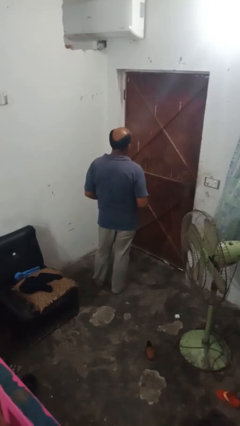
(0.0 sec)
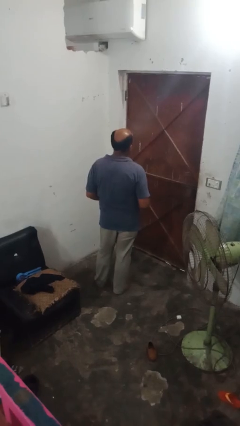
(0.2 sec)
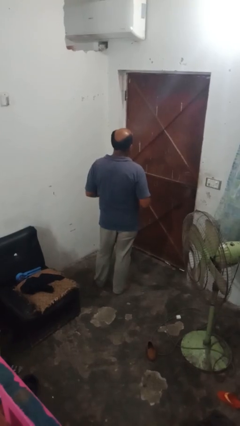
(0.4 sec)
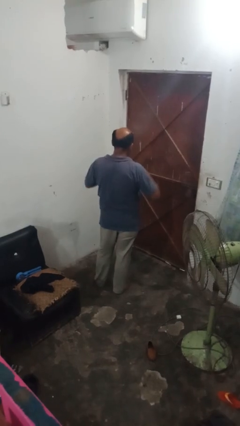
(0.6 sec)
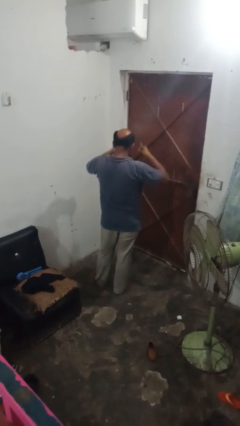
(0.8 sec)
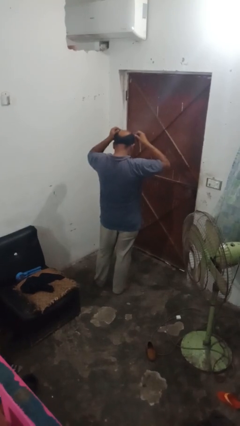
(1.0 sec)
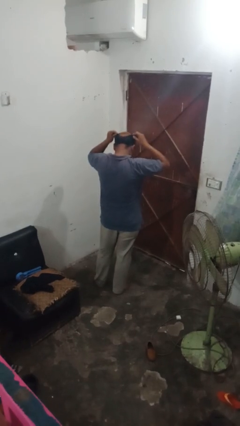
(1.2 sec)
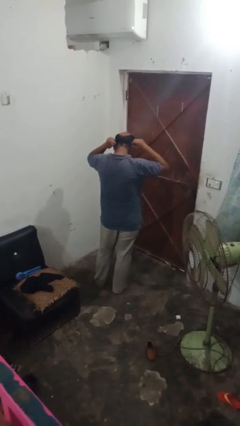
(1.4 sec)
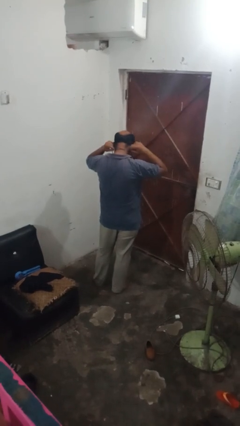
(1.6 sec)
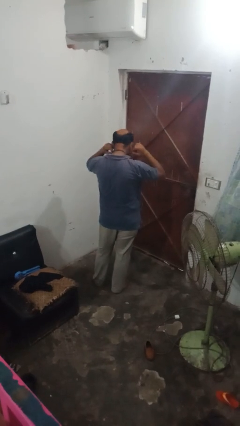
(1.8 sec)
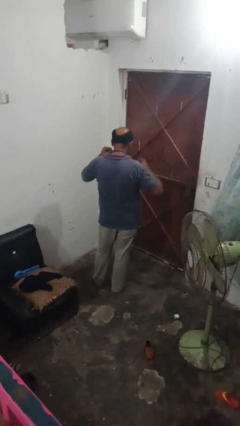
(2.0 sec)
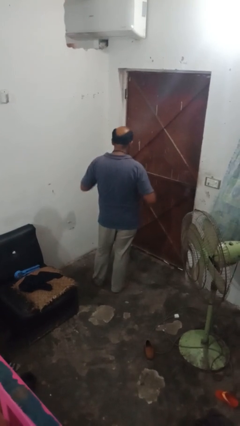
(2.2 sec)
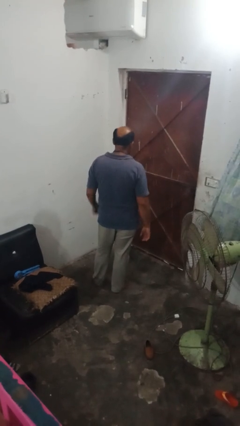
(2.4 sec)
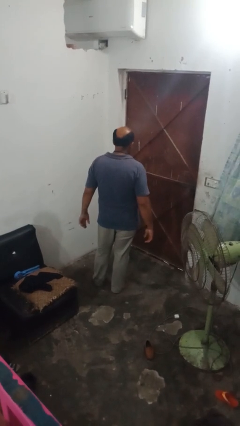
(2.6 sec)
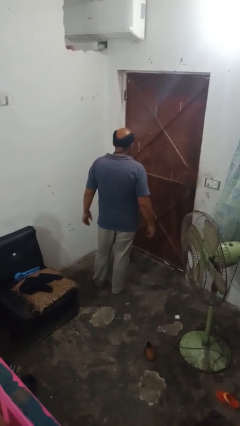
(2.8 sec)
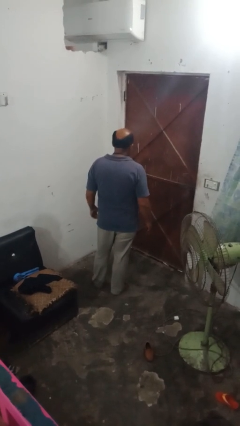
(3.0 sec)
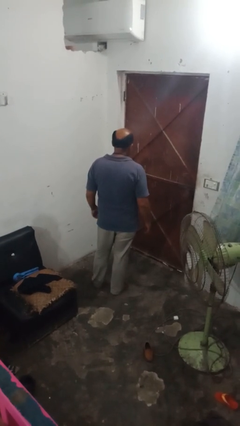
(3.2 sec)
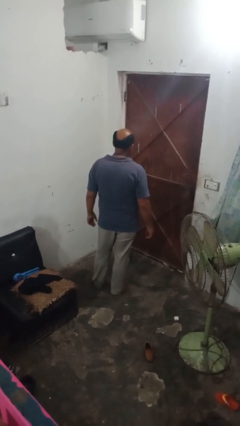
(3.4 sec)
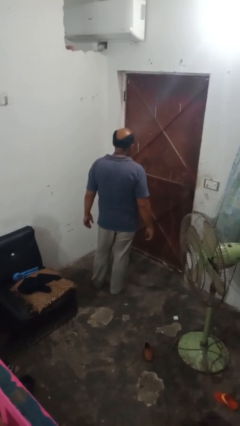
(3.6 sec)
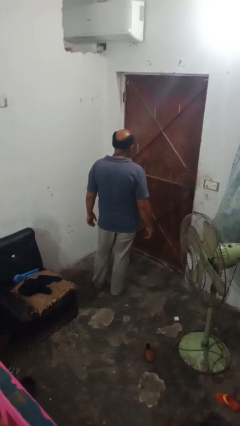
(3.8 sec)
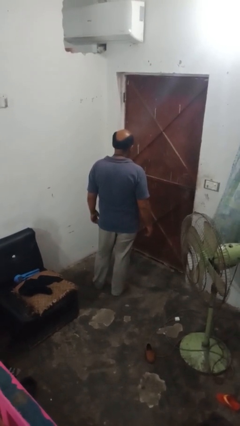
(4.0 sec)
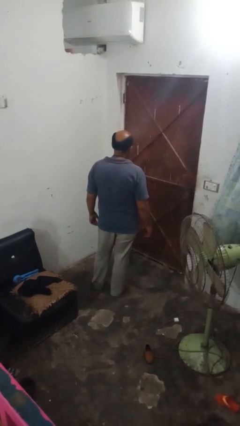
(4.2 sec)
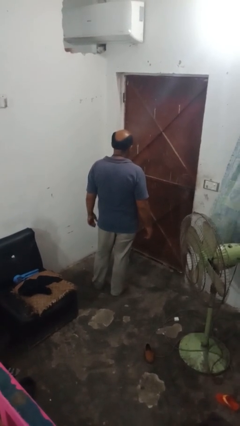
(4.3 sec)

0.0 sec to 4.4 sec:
person puts on necklace

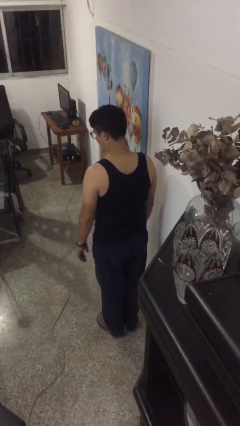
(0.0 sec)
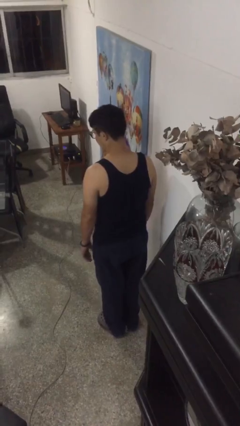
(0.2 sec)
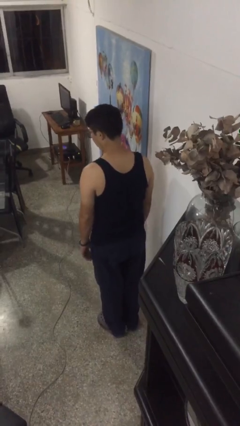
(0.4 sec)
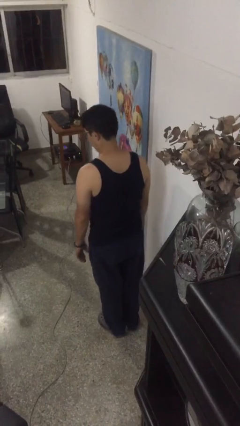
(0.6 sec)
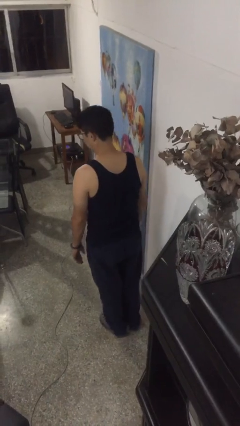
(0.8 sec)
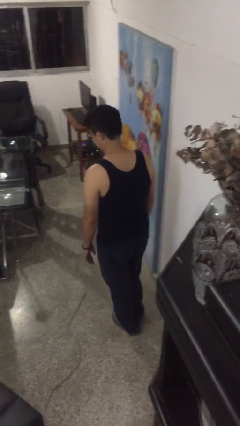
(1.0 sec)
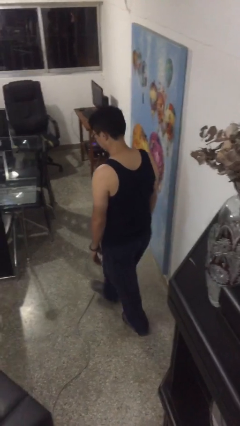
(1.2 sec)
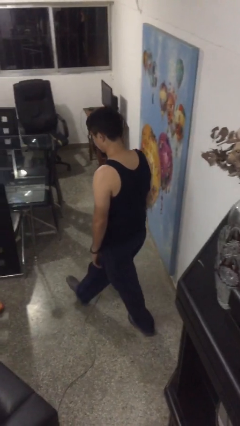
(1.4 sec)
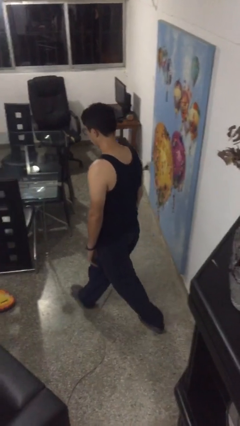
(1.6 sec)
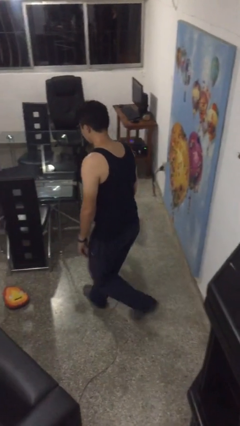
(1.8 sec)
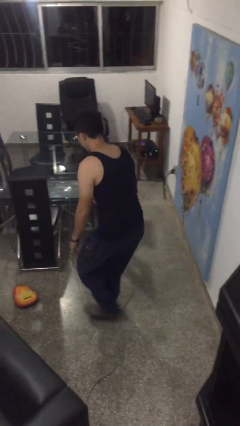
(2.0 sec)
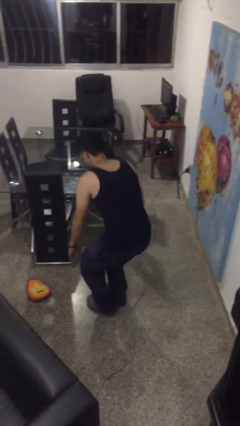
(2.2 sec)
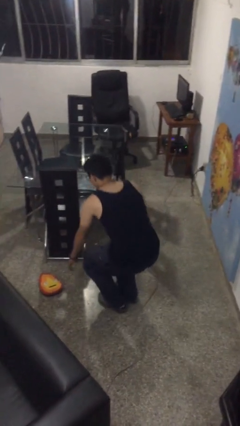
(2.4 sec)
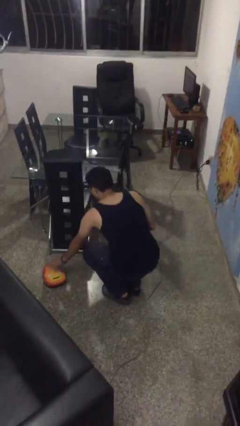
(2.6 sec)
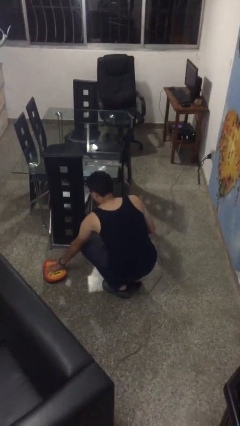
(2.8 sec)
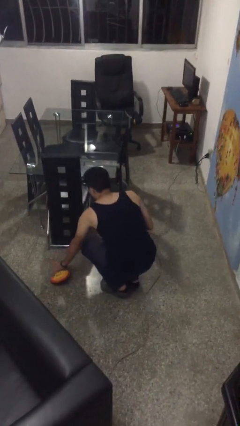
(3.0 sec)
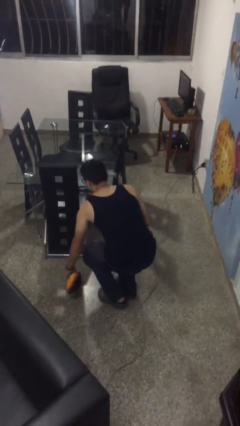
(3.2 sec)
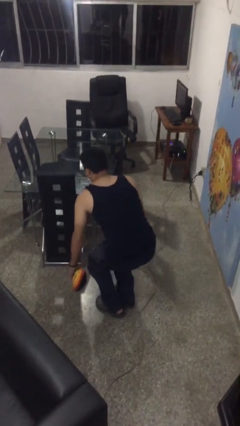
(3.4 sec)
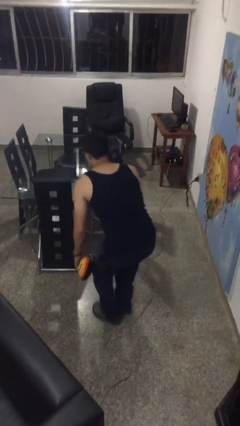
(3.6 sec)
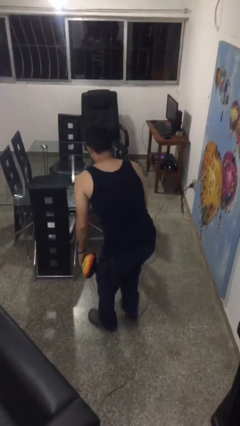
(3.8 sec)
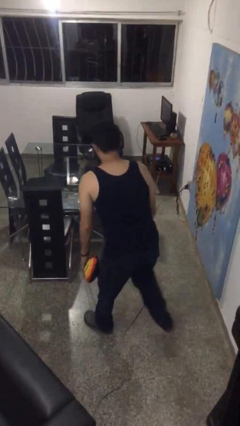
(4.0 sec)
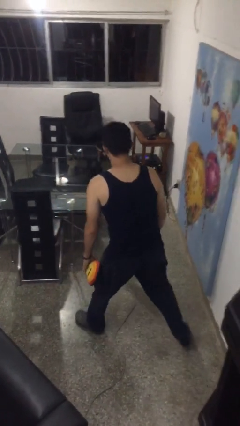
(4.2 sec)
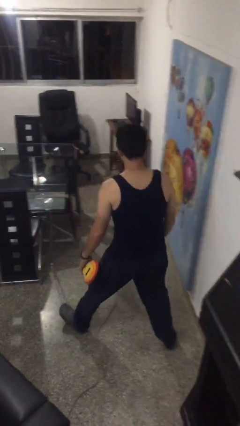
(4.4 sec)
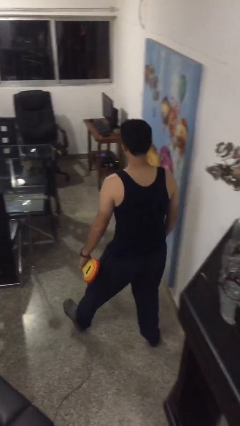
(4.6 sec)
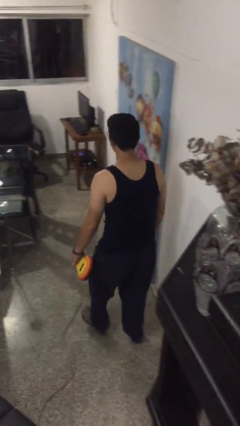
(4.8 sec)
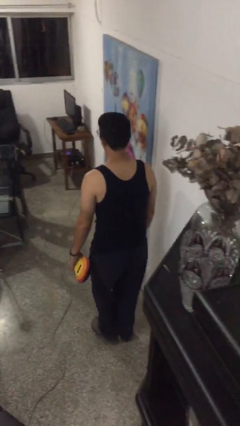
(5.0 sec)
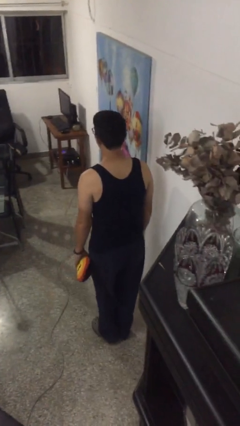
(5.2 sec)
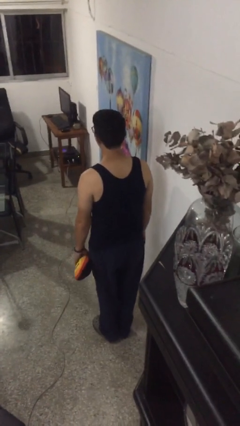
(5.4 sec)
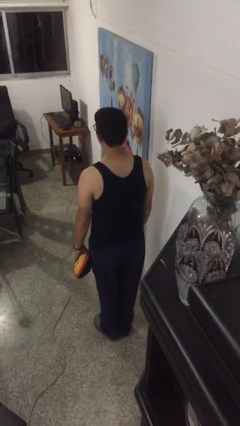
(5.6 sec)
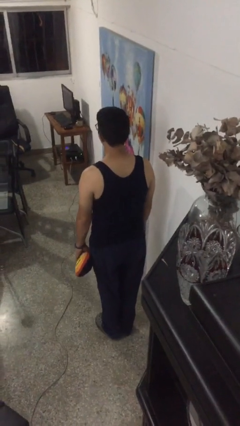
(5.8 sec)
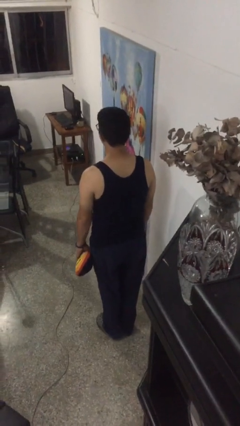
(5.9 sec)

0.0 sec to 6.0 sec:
person picks up object from floor

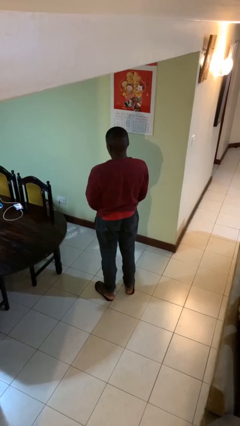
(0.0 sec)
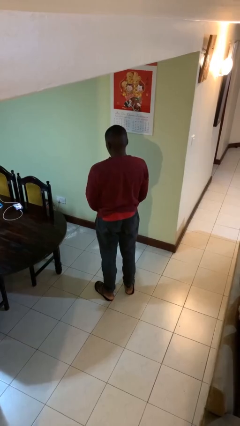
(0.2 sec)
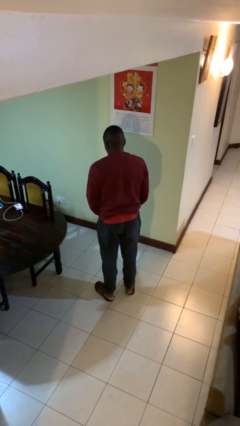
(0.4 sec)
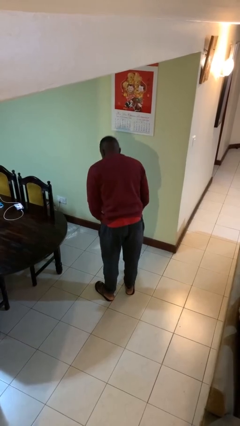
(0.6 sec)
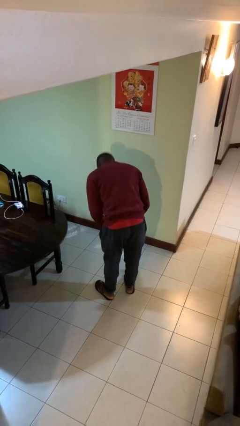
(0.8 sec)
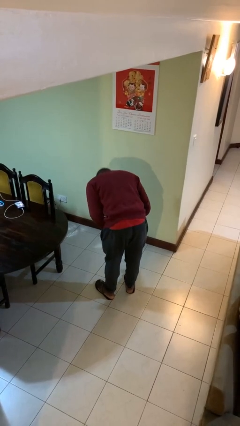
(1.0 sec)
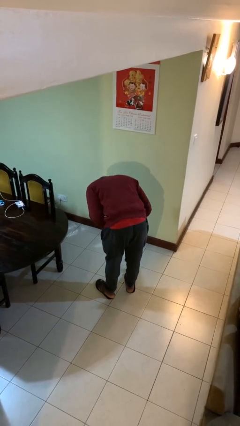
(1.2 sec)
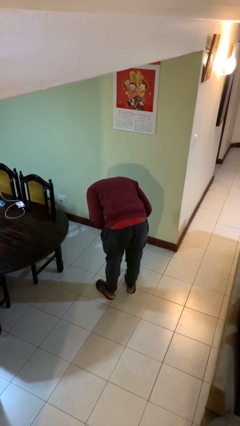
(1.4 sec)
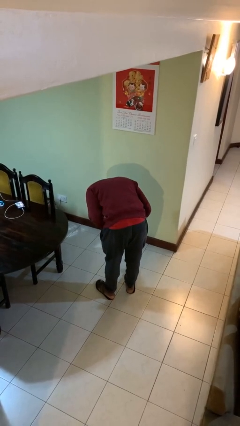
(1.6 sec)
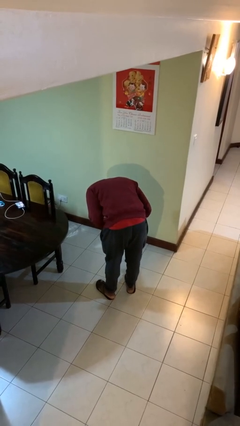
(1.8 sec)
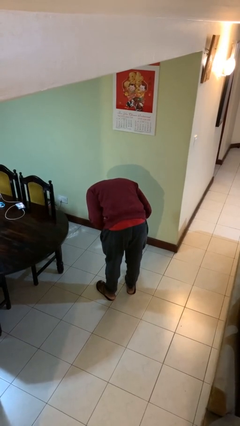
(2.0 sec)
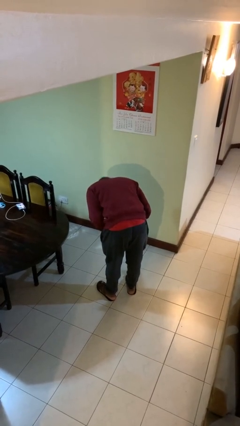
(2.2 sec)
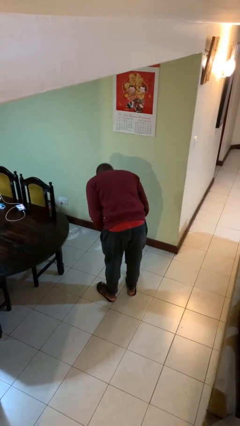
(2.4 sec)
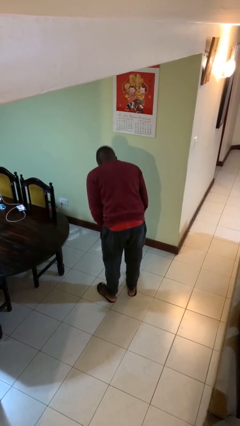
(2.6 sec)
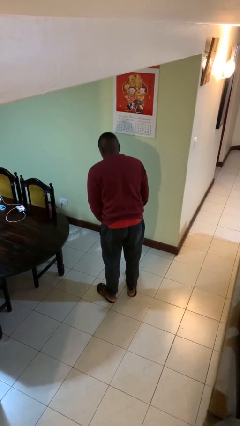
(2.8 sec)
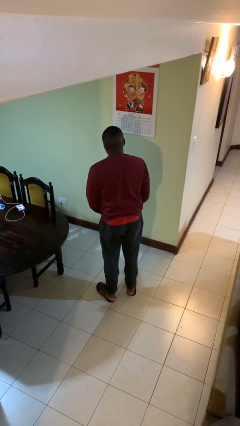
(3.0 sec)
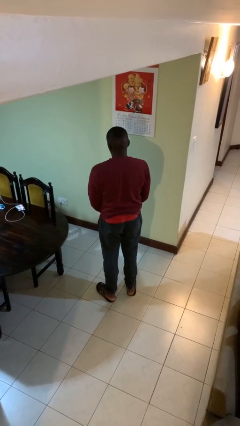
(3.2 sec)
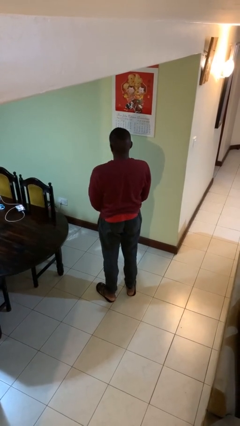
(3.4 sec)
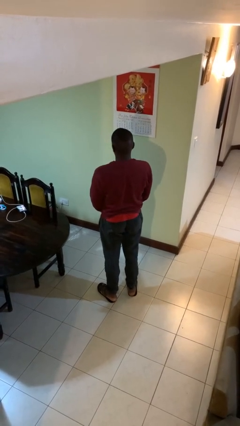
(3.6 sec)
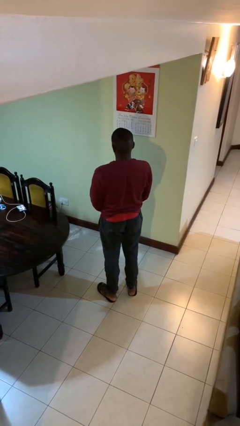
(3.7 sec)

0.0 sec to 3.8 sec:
person bows

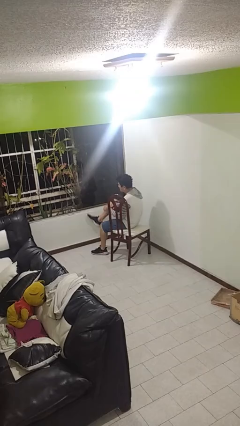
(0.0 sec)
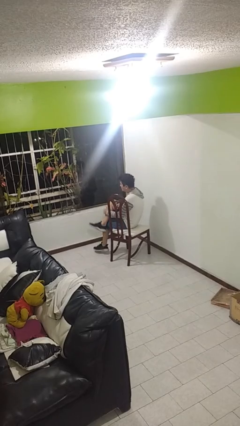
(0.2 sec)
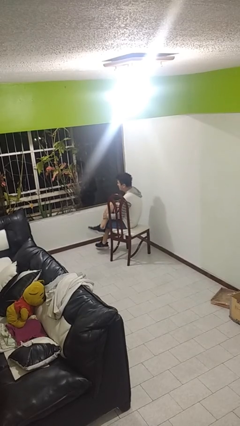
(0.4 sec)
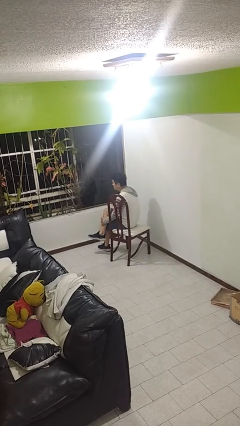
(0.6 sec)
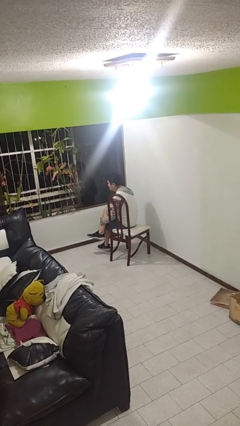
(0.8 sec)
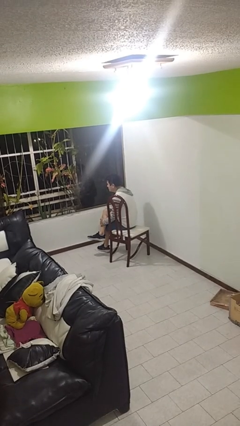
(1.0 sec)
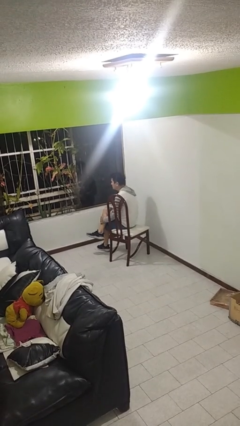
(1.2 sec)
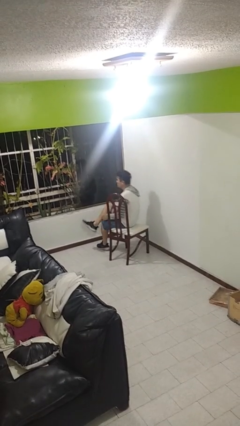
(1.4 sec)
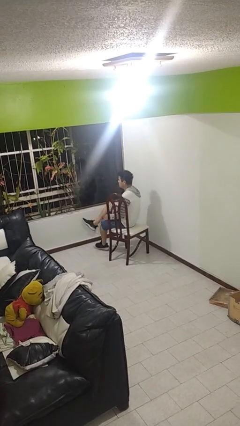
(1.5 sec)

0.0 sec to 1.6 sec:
person crosses legs

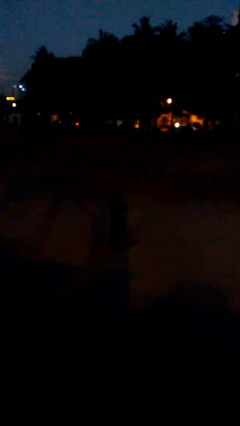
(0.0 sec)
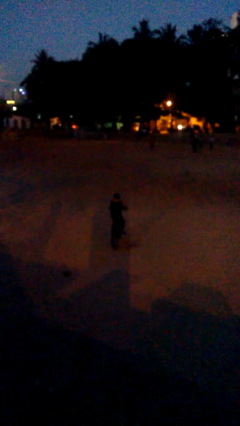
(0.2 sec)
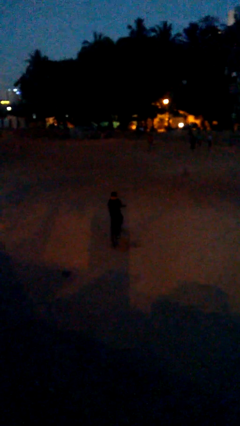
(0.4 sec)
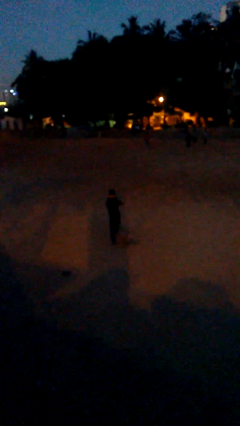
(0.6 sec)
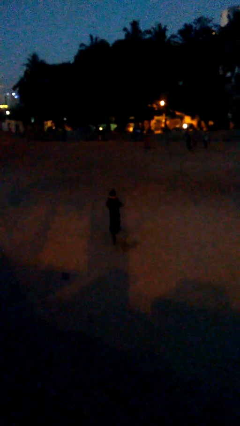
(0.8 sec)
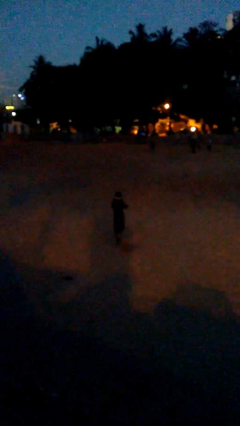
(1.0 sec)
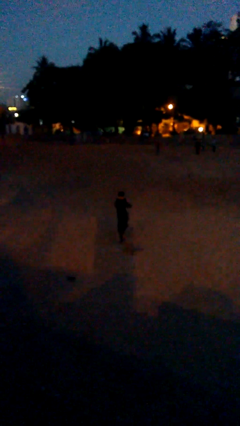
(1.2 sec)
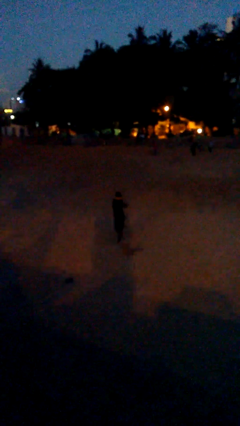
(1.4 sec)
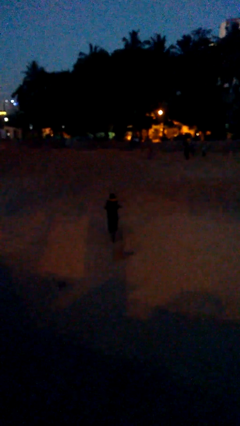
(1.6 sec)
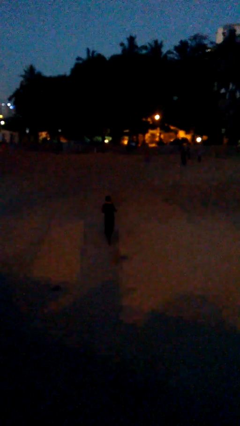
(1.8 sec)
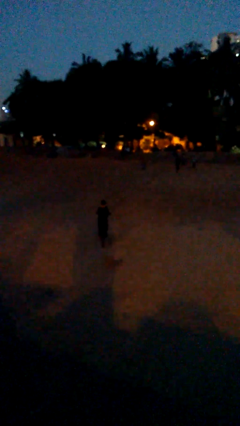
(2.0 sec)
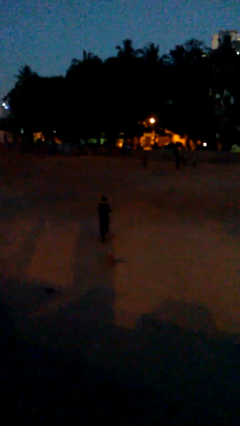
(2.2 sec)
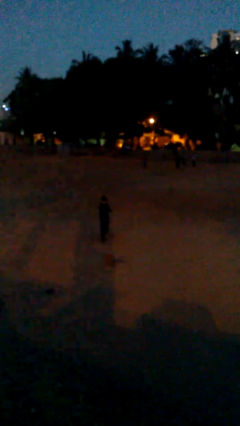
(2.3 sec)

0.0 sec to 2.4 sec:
person rides bicycle
